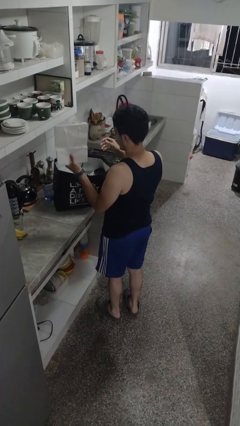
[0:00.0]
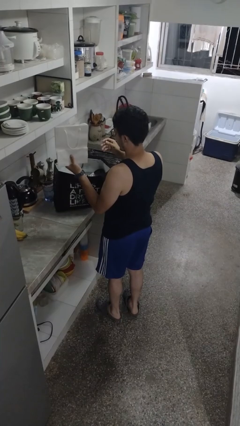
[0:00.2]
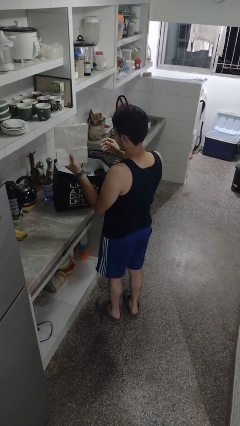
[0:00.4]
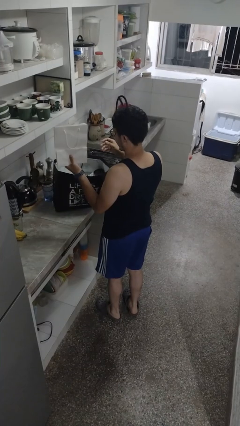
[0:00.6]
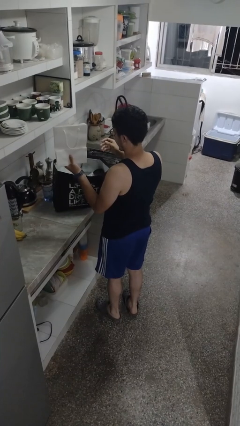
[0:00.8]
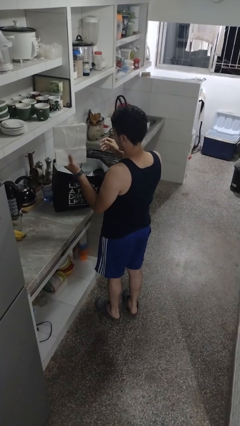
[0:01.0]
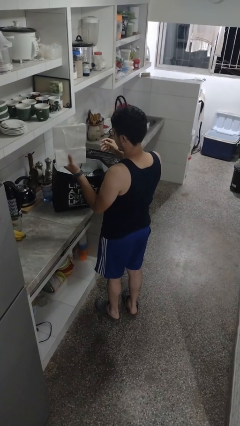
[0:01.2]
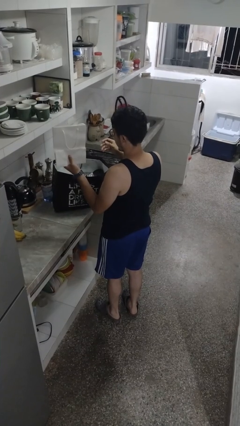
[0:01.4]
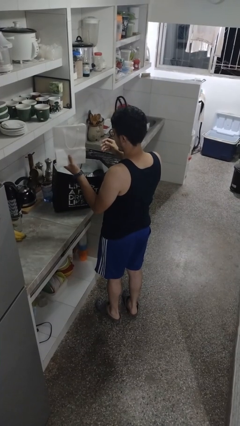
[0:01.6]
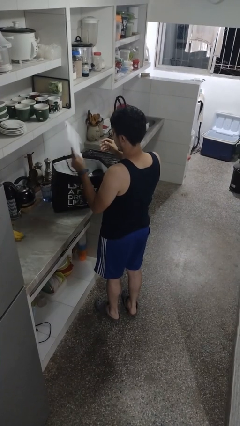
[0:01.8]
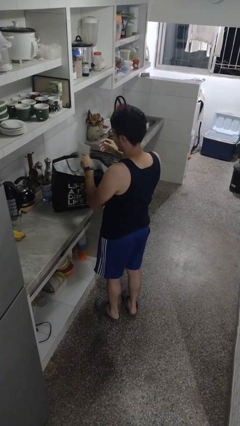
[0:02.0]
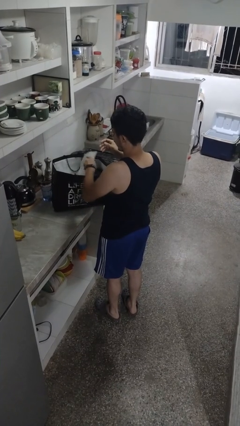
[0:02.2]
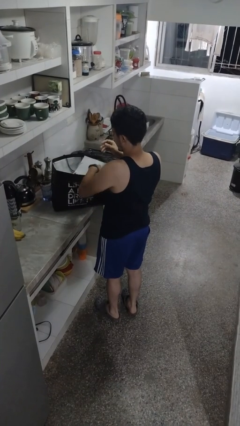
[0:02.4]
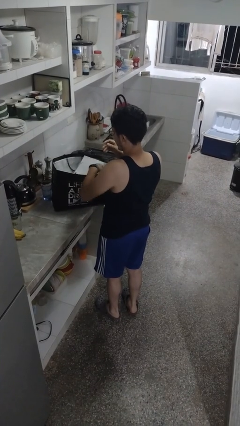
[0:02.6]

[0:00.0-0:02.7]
person puts object into bag

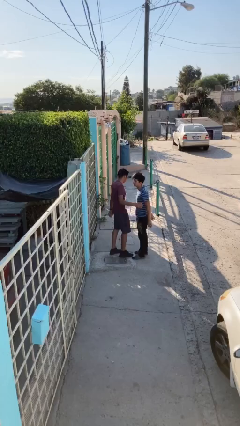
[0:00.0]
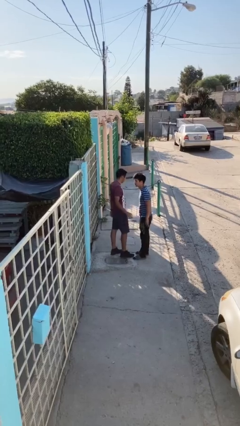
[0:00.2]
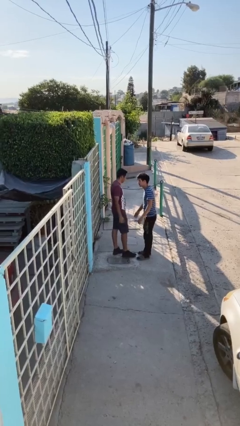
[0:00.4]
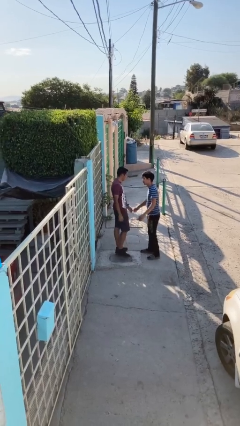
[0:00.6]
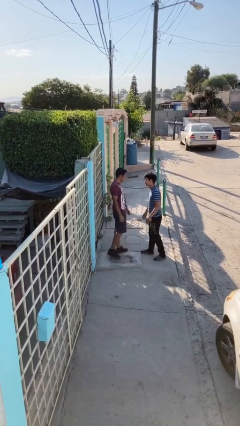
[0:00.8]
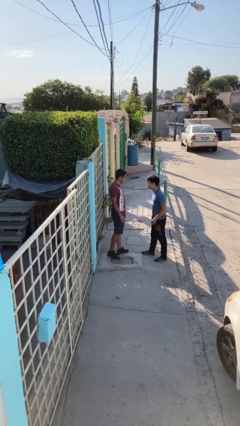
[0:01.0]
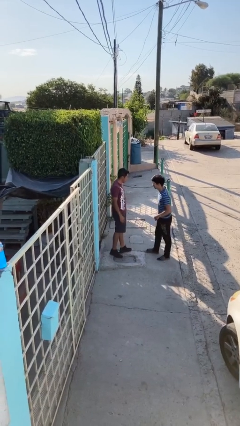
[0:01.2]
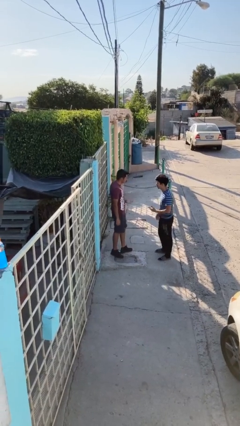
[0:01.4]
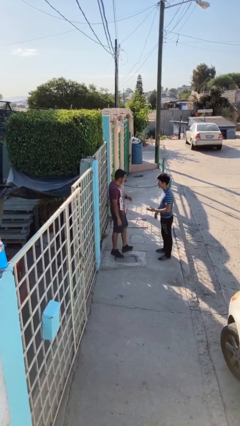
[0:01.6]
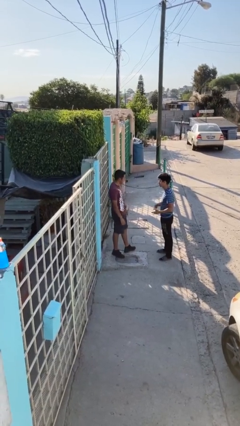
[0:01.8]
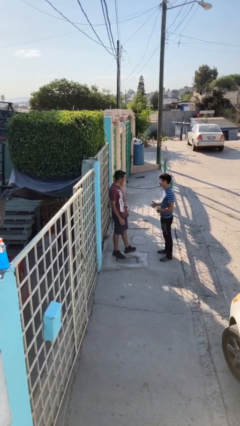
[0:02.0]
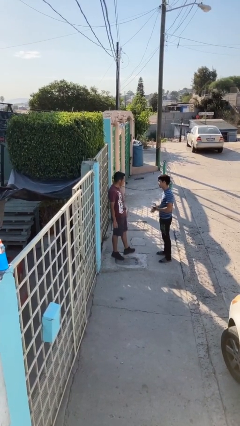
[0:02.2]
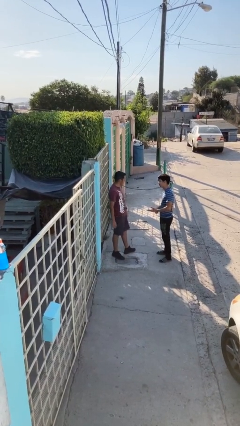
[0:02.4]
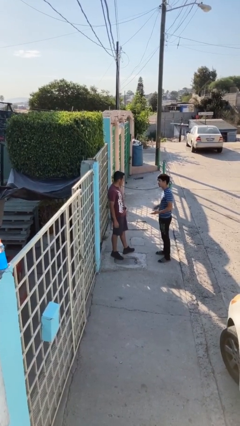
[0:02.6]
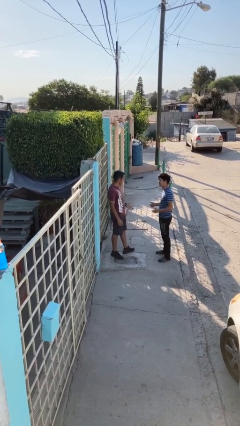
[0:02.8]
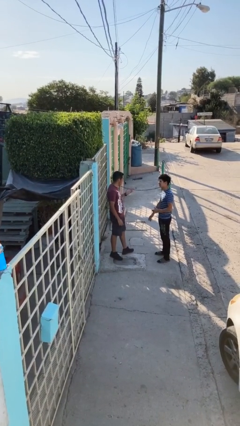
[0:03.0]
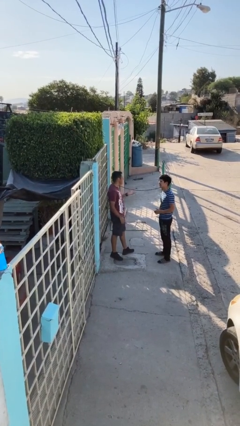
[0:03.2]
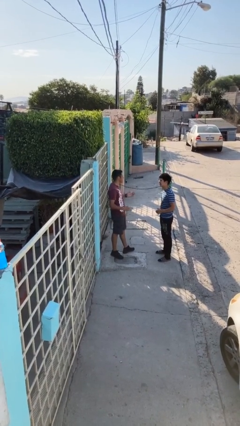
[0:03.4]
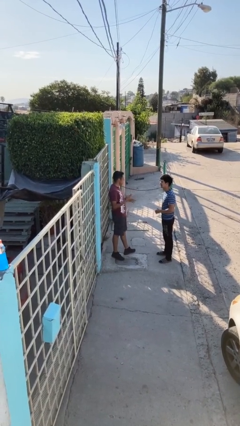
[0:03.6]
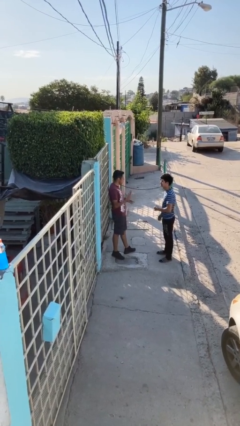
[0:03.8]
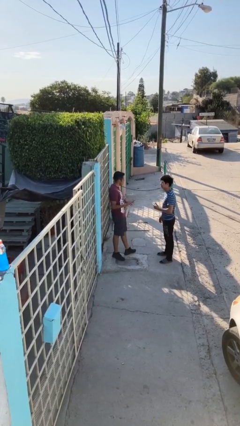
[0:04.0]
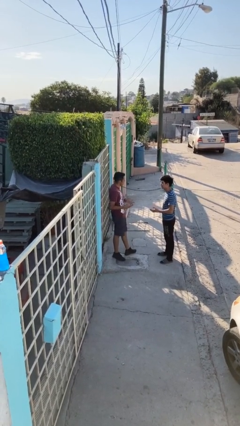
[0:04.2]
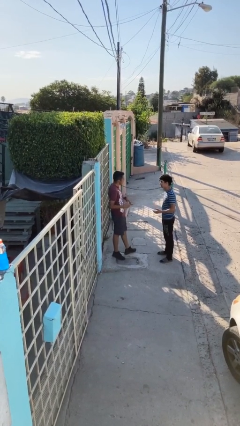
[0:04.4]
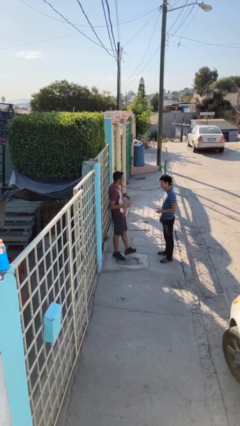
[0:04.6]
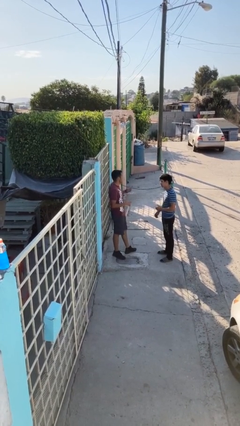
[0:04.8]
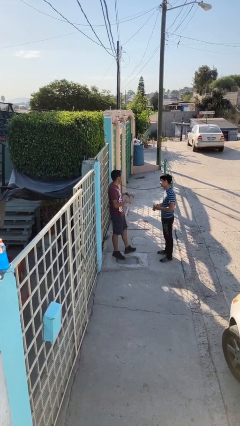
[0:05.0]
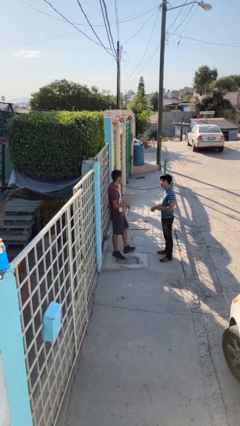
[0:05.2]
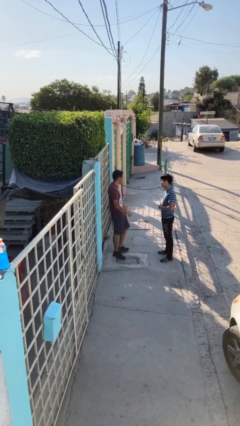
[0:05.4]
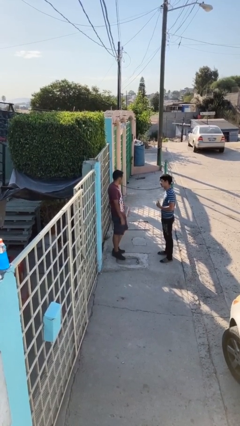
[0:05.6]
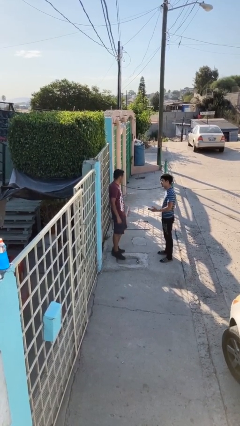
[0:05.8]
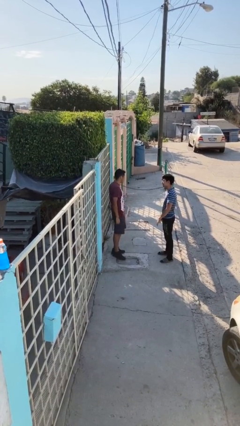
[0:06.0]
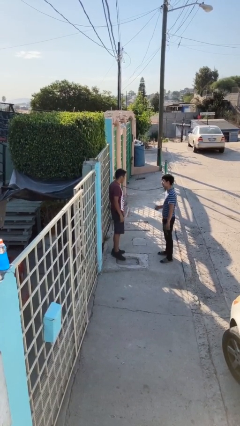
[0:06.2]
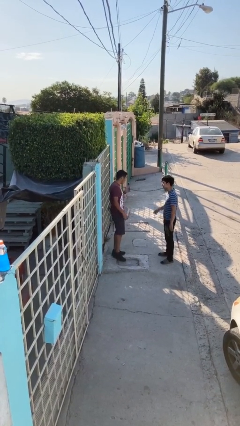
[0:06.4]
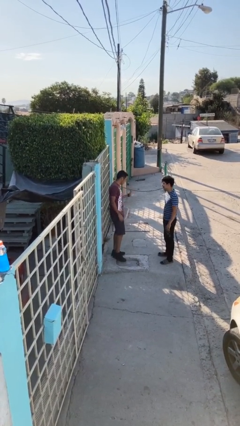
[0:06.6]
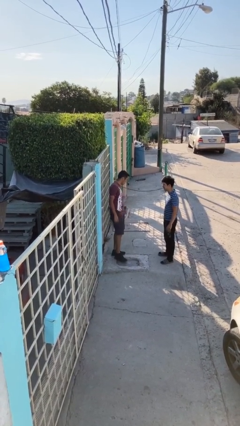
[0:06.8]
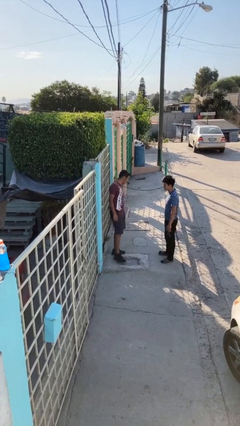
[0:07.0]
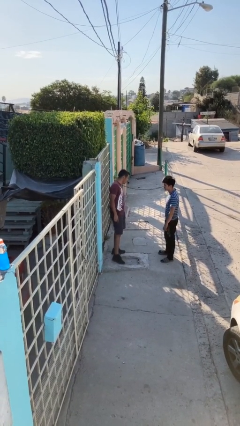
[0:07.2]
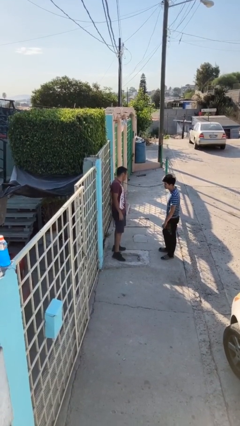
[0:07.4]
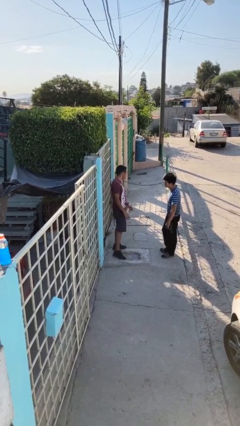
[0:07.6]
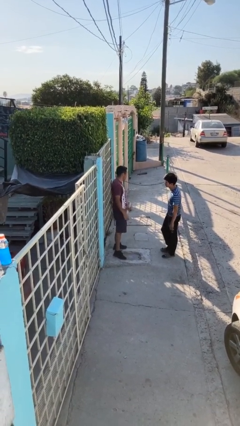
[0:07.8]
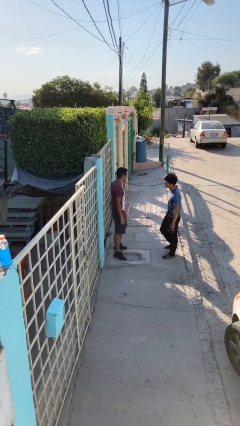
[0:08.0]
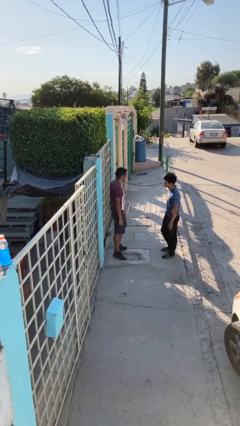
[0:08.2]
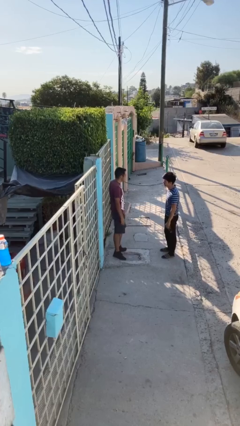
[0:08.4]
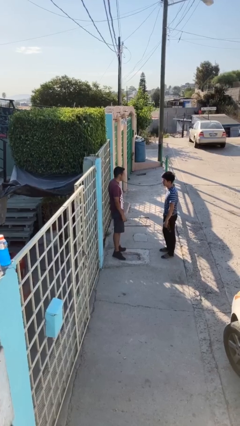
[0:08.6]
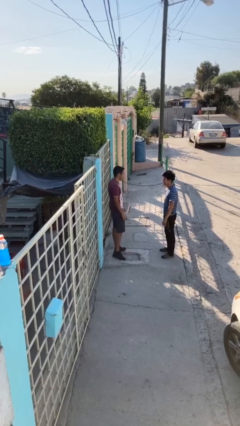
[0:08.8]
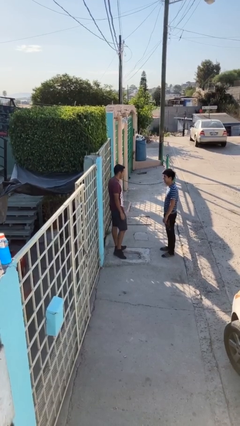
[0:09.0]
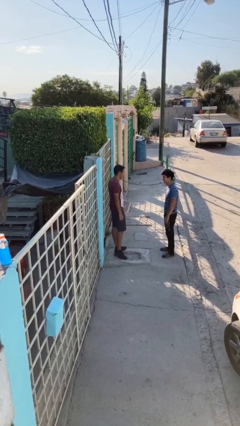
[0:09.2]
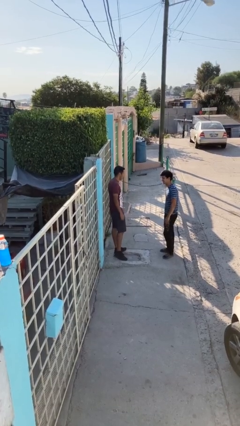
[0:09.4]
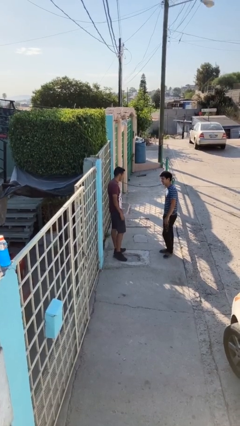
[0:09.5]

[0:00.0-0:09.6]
person talks to person

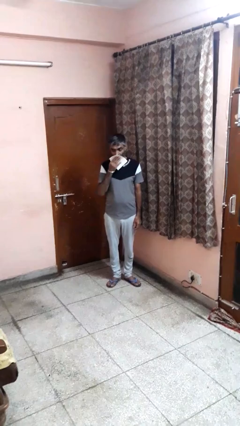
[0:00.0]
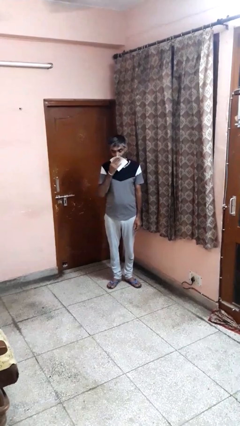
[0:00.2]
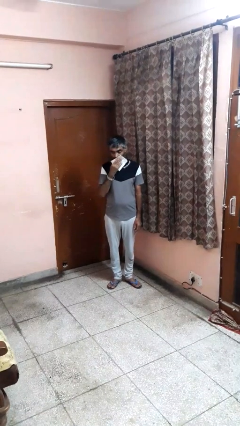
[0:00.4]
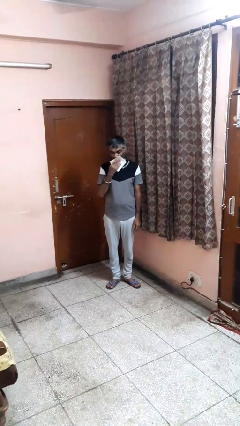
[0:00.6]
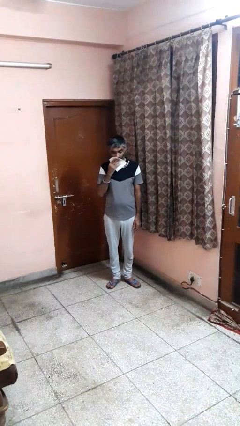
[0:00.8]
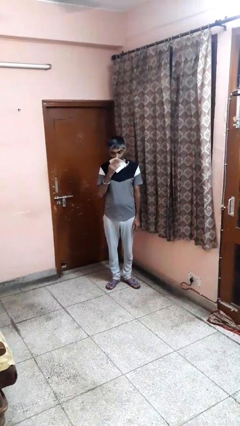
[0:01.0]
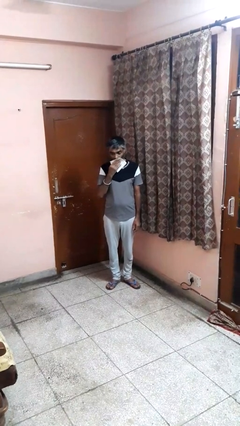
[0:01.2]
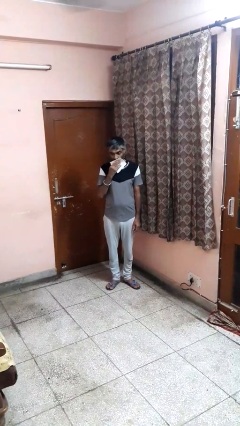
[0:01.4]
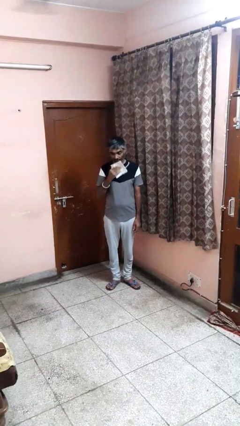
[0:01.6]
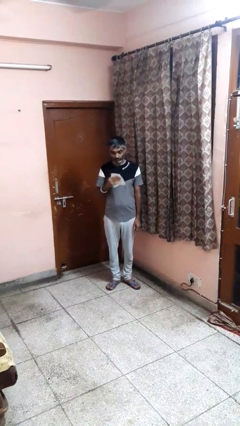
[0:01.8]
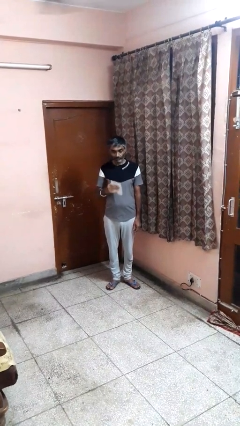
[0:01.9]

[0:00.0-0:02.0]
person wipes mouth with napkin

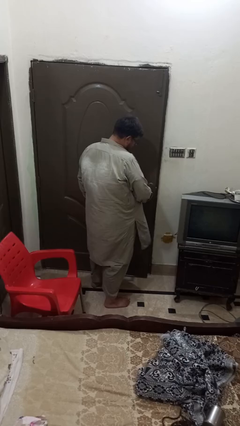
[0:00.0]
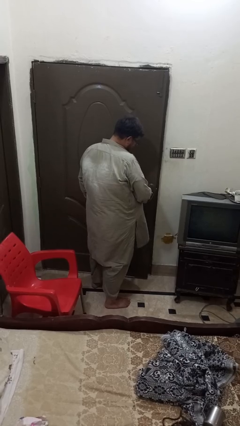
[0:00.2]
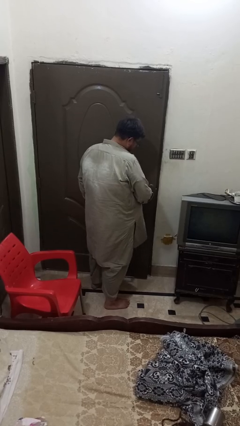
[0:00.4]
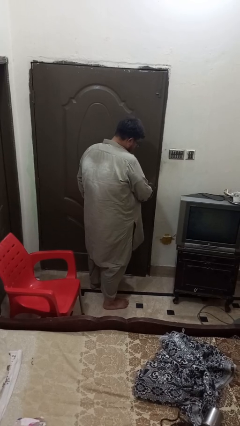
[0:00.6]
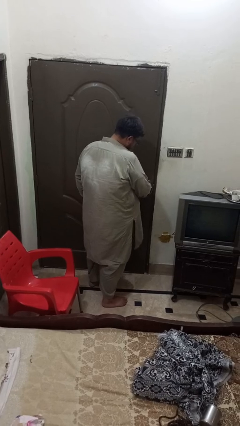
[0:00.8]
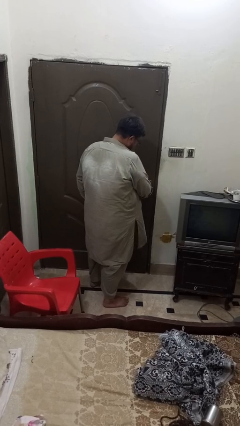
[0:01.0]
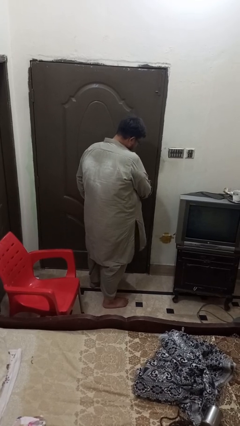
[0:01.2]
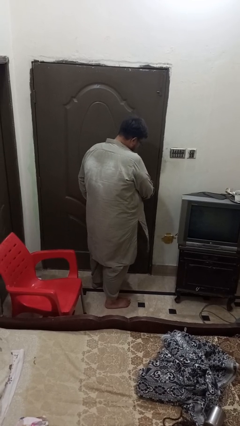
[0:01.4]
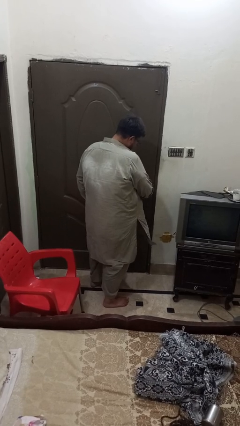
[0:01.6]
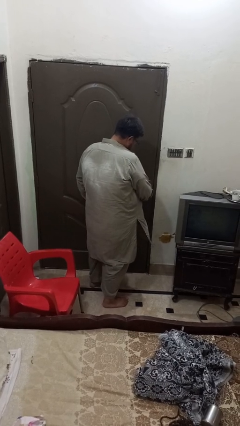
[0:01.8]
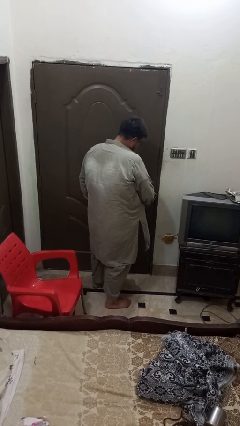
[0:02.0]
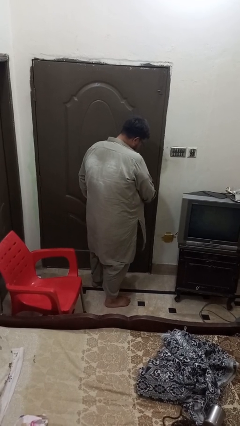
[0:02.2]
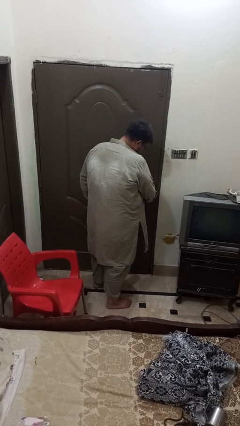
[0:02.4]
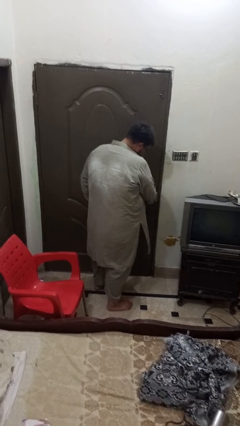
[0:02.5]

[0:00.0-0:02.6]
person closes facility door

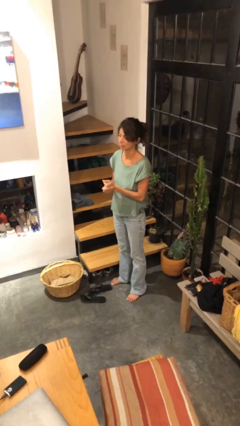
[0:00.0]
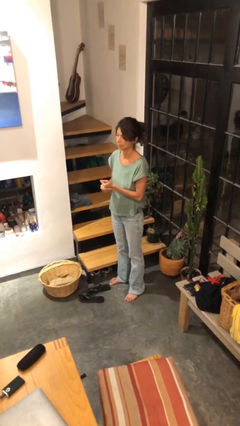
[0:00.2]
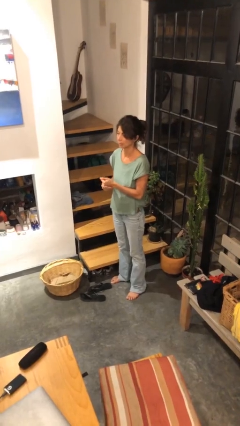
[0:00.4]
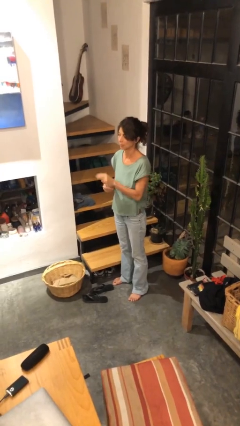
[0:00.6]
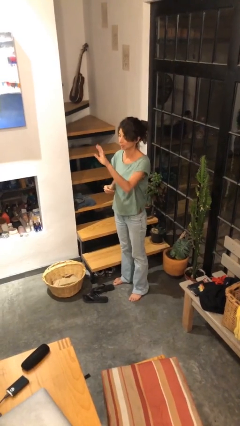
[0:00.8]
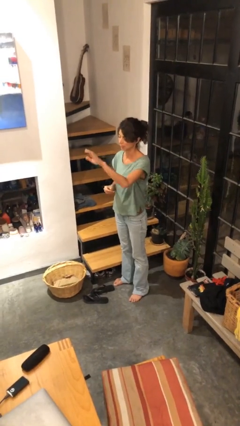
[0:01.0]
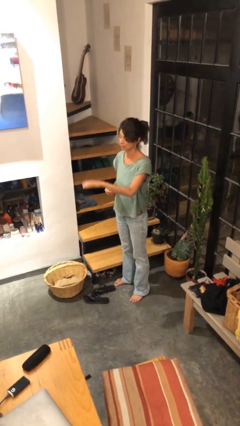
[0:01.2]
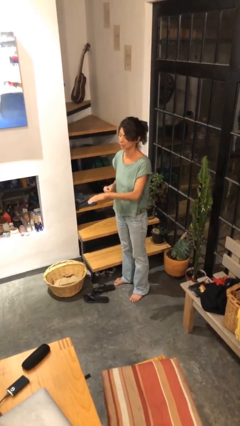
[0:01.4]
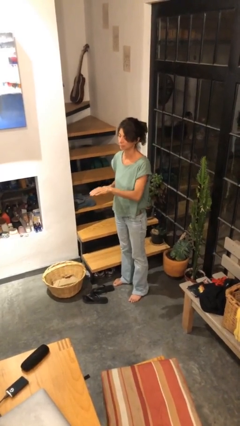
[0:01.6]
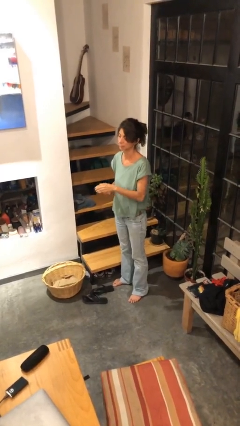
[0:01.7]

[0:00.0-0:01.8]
person gestures swipe down
